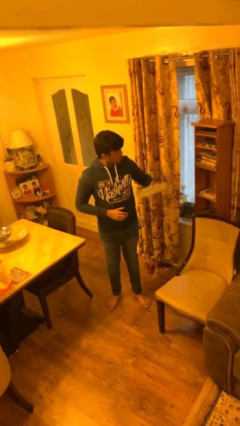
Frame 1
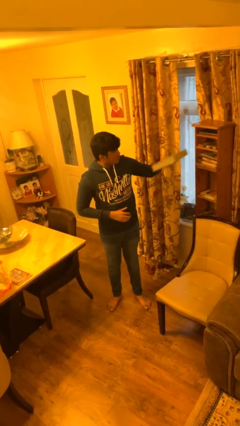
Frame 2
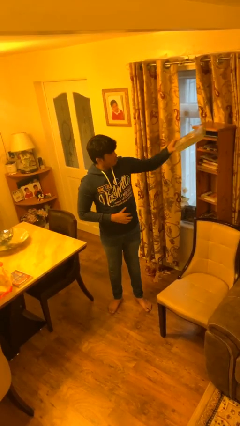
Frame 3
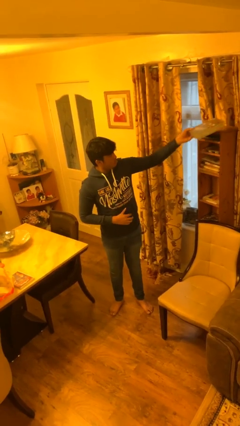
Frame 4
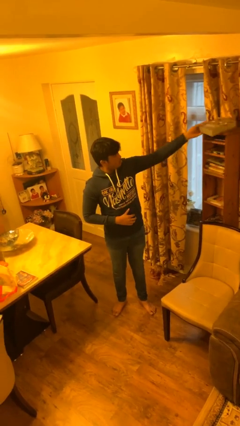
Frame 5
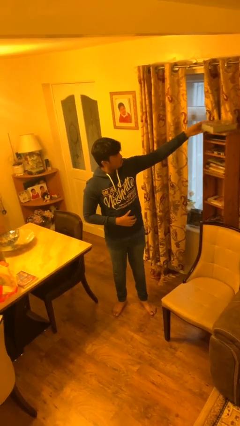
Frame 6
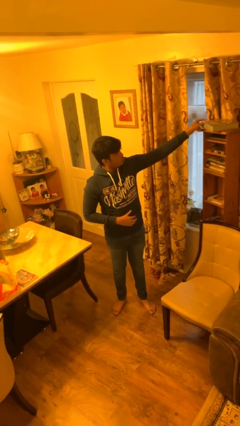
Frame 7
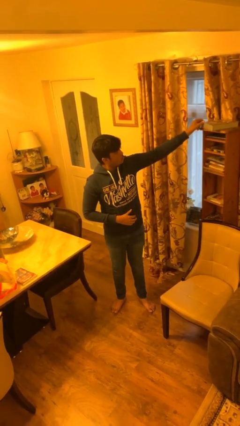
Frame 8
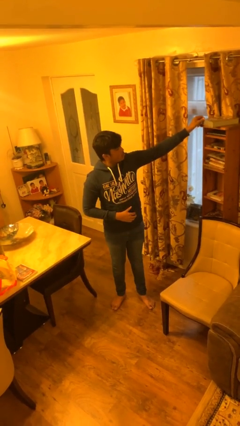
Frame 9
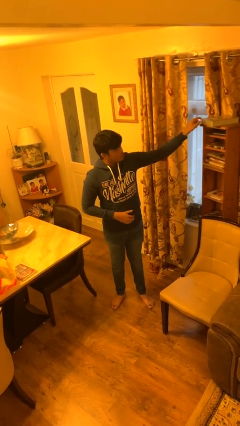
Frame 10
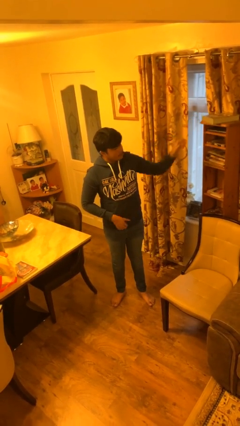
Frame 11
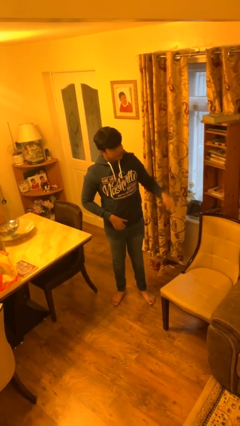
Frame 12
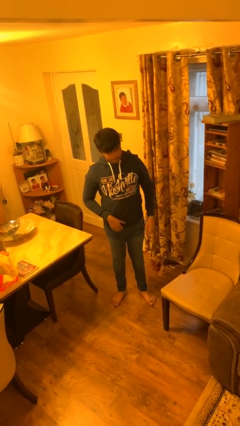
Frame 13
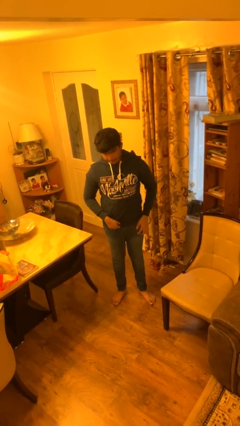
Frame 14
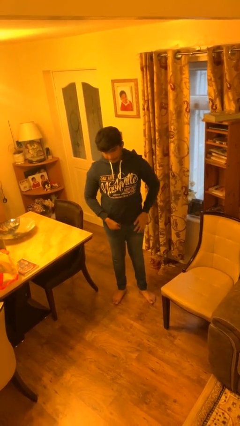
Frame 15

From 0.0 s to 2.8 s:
person puts down object on shelf

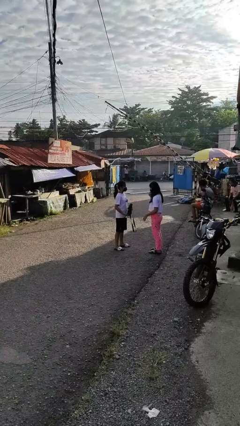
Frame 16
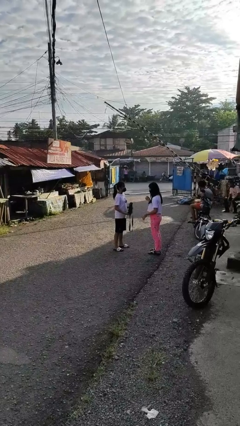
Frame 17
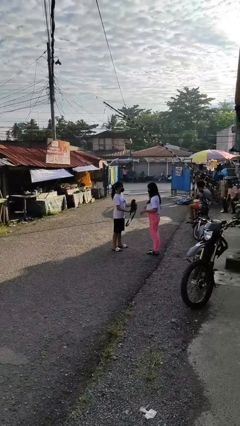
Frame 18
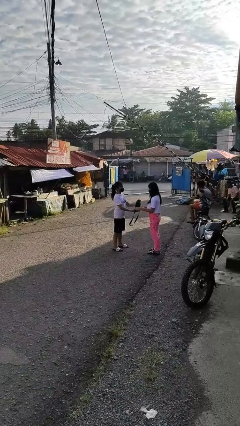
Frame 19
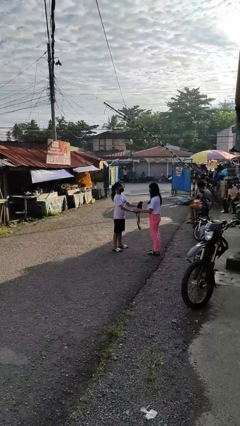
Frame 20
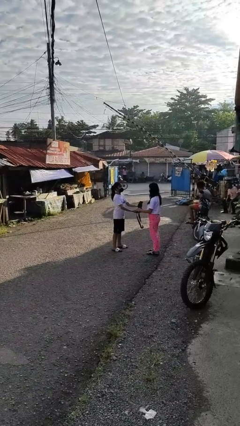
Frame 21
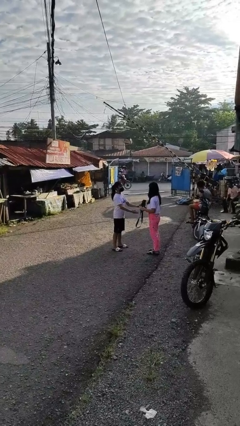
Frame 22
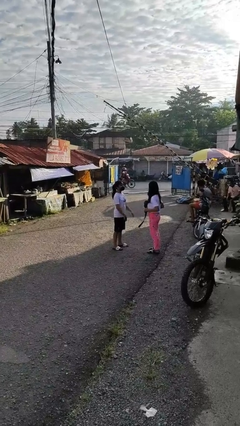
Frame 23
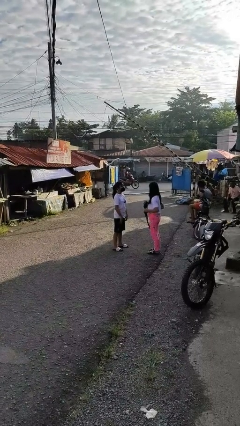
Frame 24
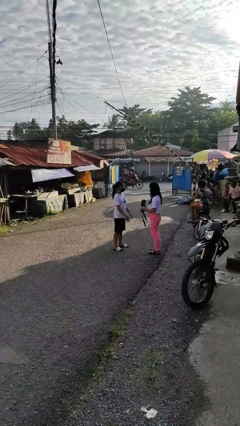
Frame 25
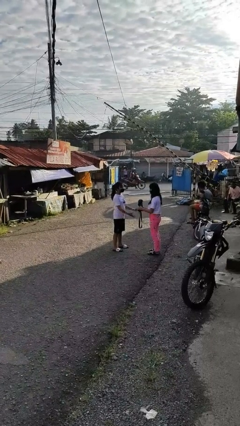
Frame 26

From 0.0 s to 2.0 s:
person transfers object to person

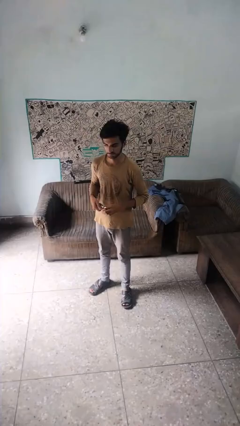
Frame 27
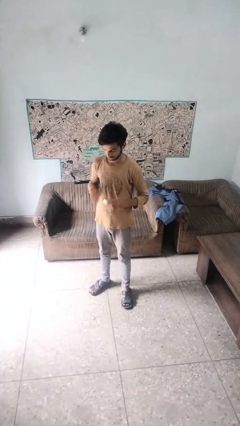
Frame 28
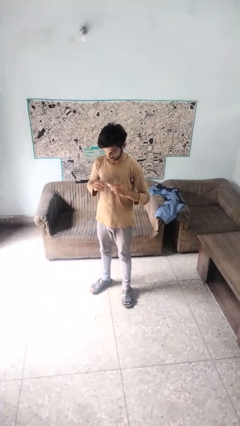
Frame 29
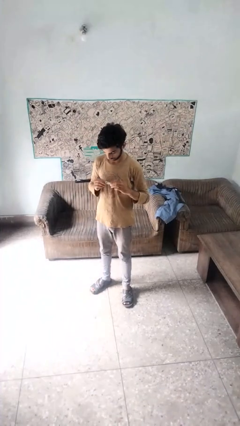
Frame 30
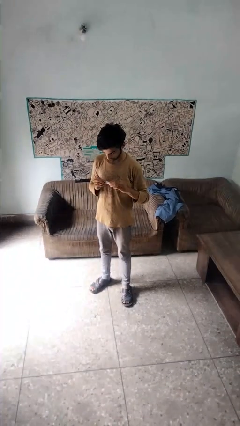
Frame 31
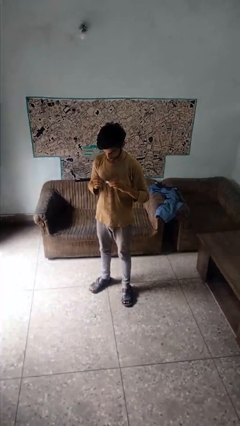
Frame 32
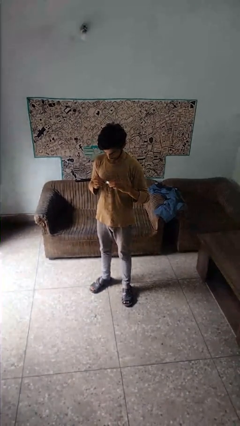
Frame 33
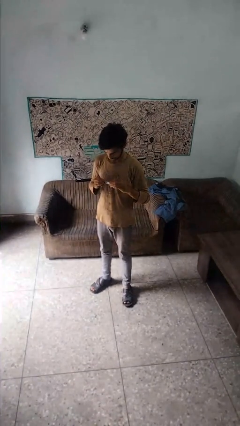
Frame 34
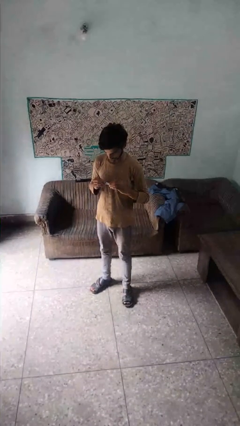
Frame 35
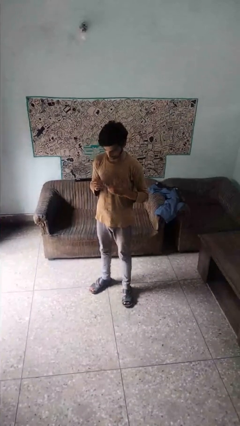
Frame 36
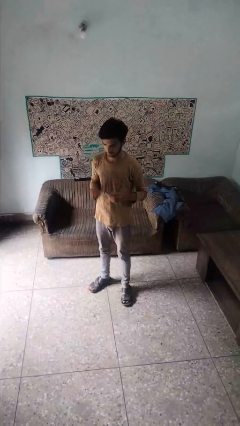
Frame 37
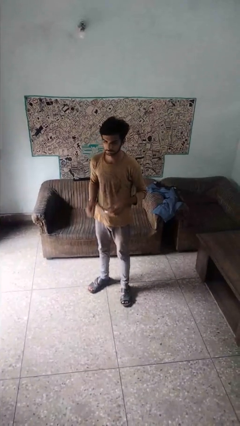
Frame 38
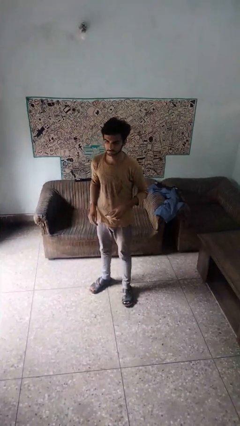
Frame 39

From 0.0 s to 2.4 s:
person clips fingernails

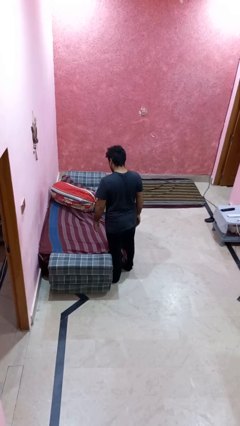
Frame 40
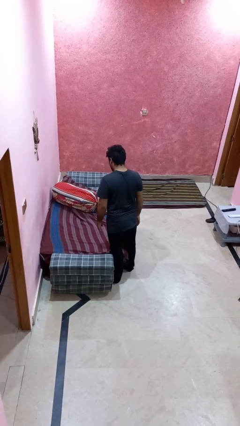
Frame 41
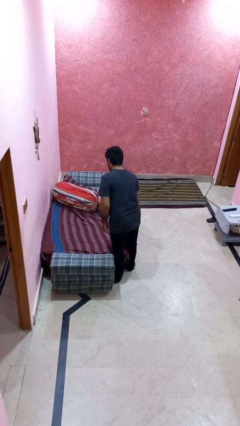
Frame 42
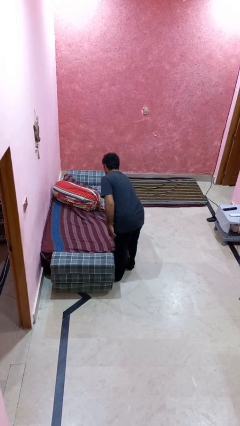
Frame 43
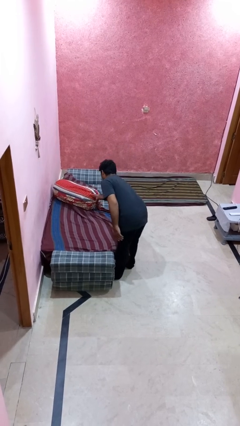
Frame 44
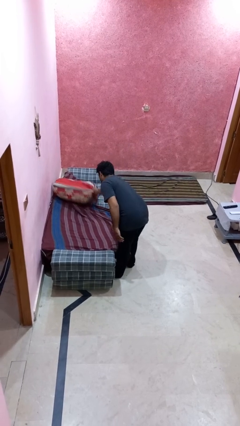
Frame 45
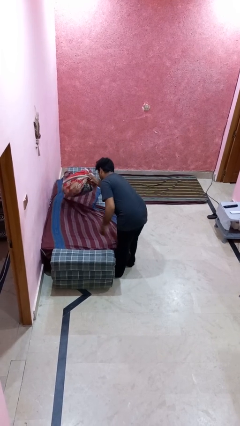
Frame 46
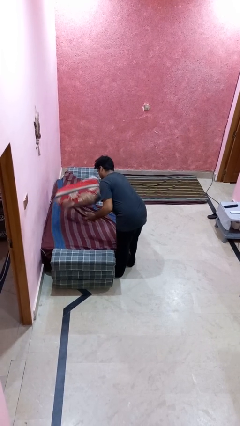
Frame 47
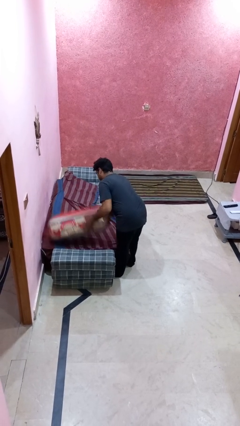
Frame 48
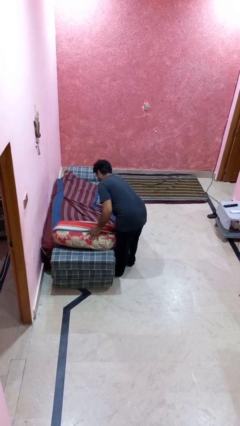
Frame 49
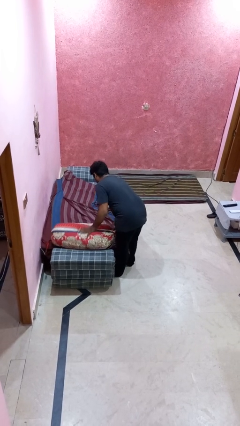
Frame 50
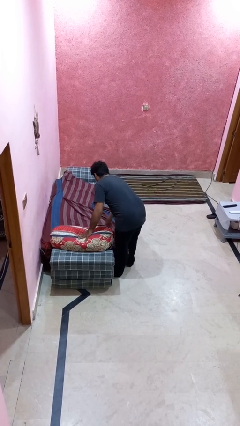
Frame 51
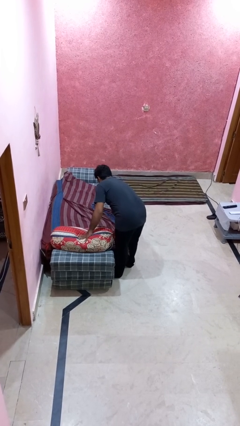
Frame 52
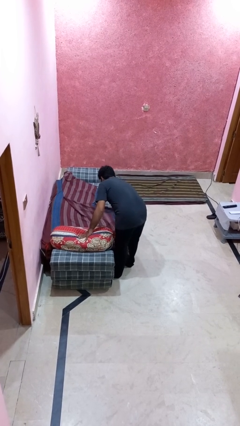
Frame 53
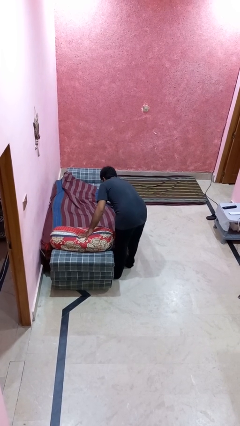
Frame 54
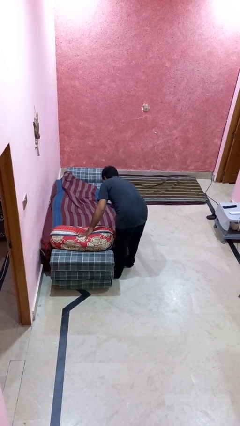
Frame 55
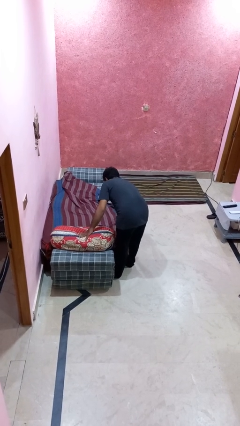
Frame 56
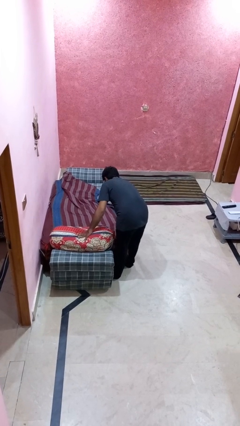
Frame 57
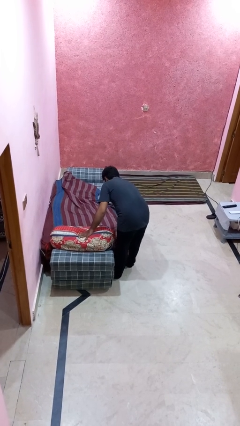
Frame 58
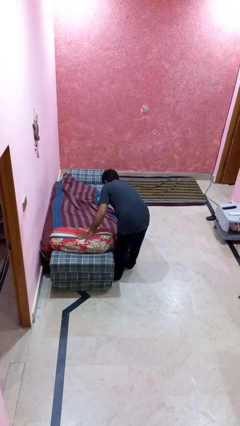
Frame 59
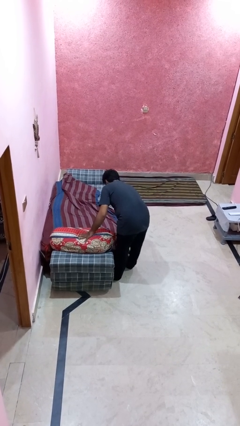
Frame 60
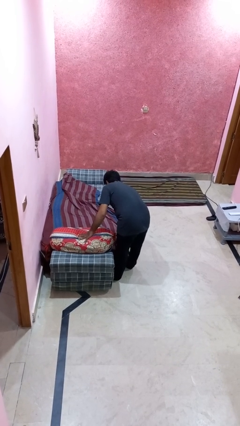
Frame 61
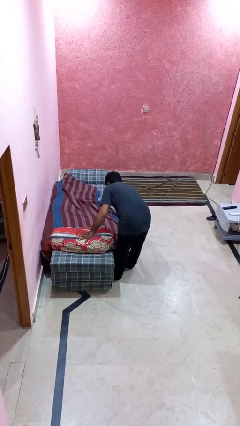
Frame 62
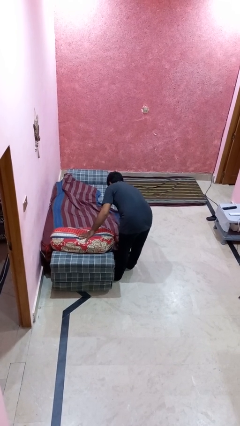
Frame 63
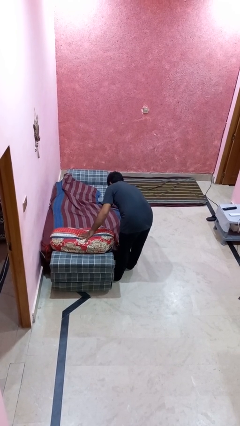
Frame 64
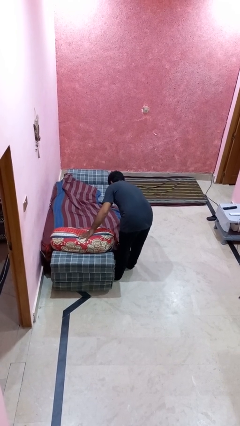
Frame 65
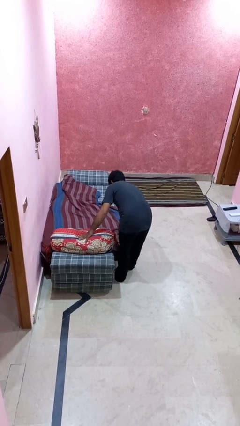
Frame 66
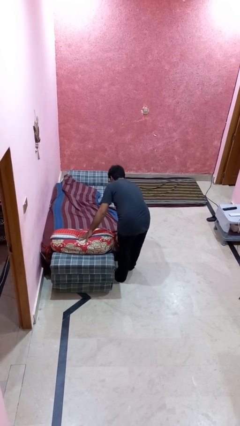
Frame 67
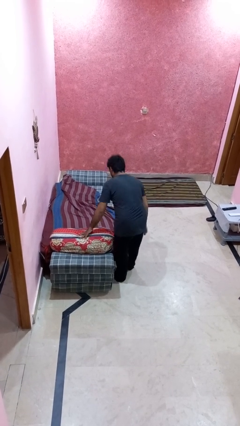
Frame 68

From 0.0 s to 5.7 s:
person makes bed

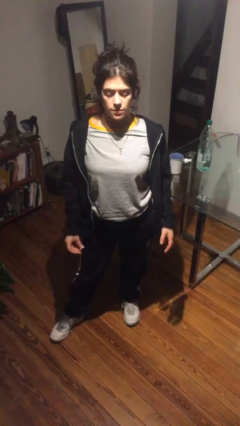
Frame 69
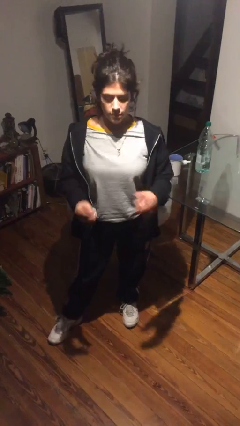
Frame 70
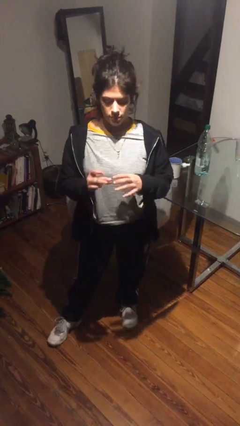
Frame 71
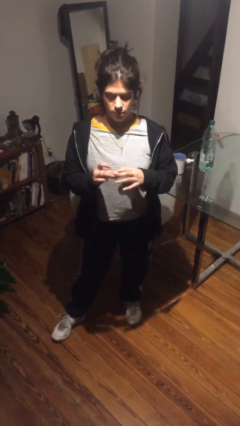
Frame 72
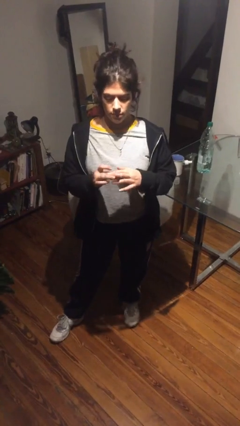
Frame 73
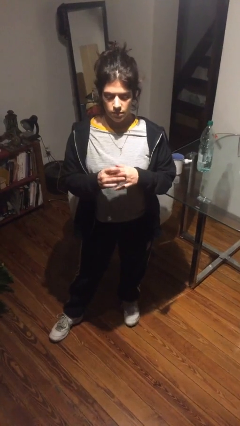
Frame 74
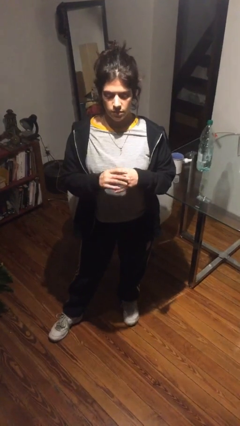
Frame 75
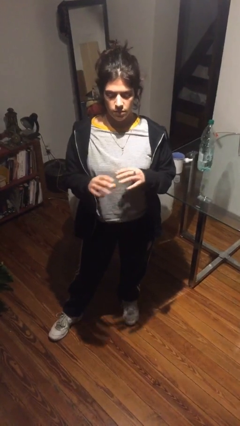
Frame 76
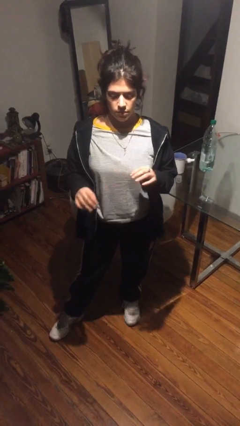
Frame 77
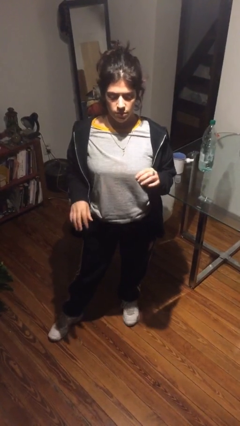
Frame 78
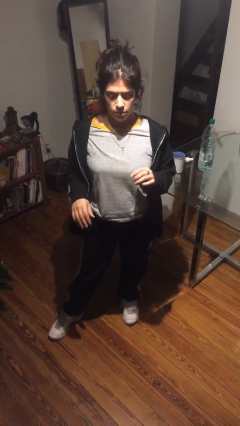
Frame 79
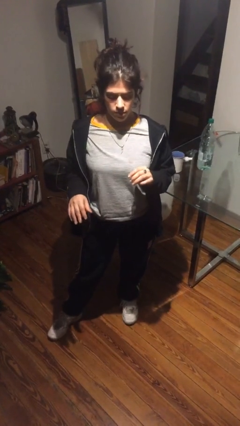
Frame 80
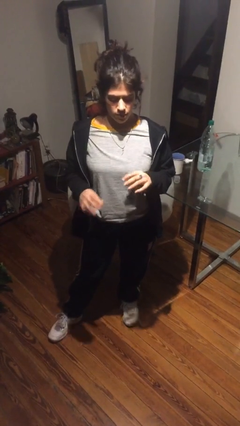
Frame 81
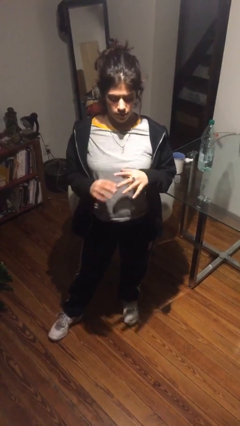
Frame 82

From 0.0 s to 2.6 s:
person puts on ring

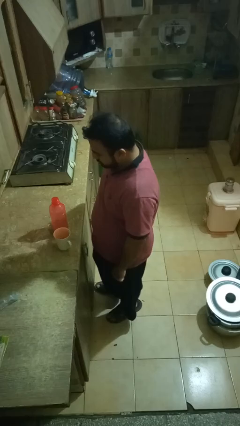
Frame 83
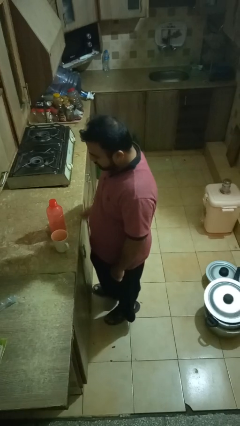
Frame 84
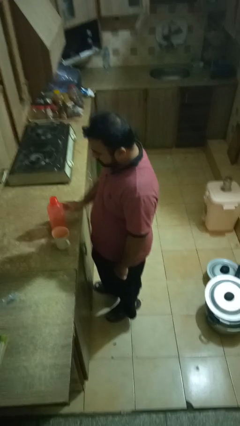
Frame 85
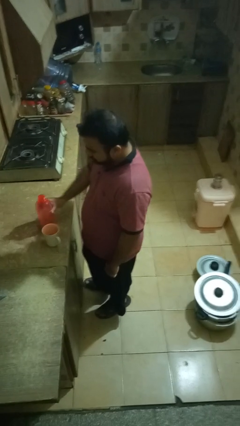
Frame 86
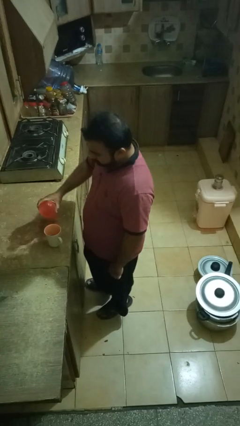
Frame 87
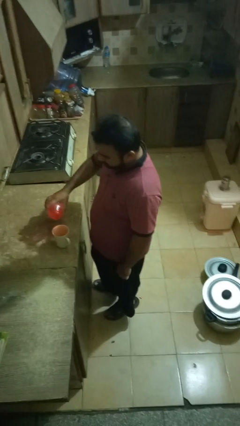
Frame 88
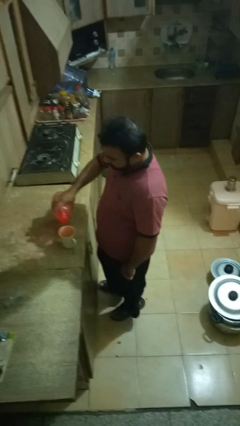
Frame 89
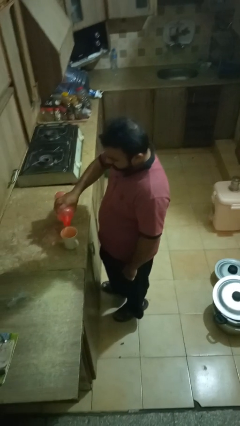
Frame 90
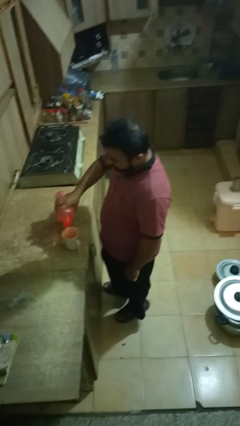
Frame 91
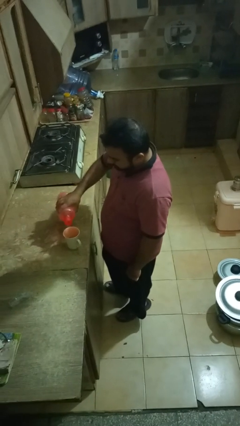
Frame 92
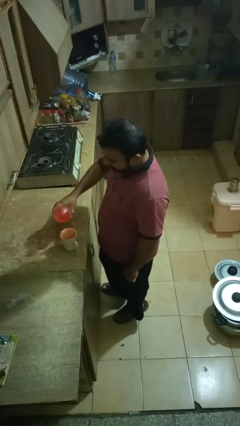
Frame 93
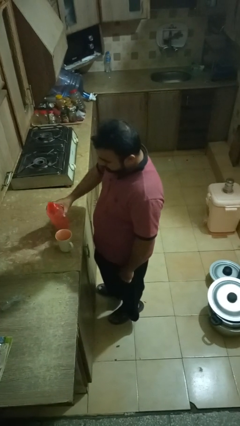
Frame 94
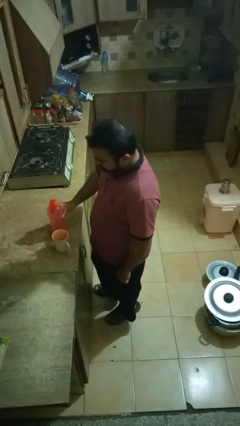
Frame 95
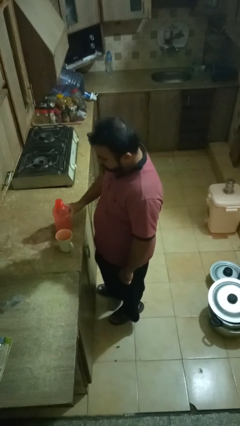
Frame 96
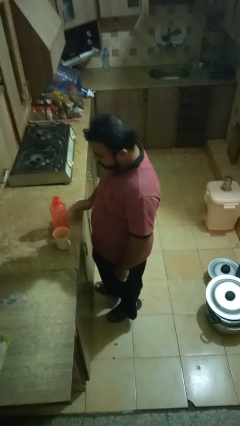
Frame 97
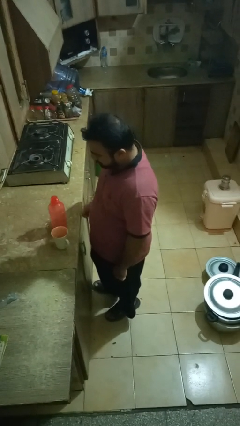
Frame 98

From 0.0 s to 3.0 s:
person pours liquid into cup
